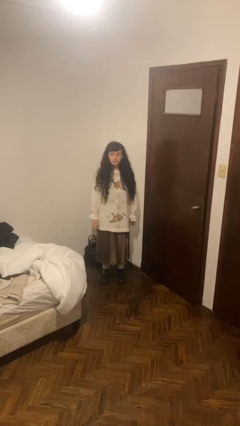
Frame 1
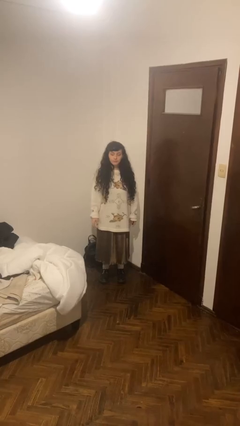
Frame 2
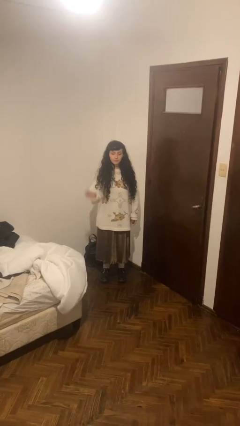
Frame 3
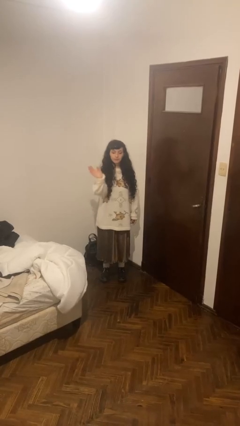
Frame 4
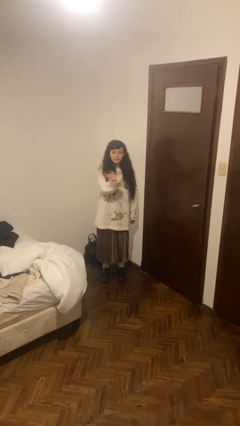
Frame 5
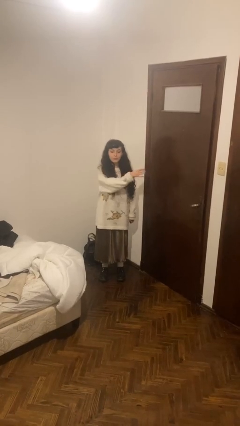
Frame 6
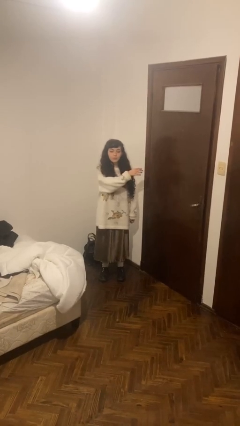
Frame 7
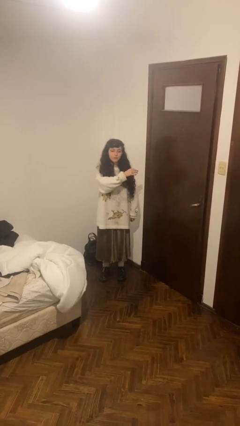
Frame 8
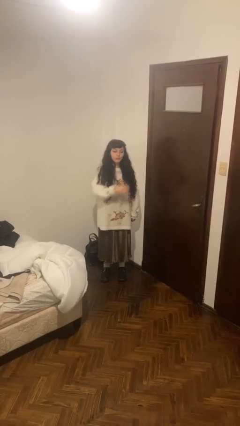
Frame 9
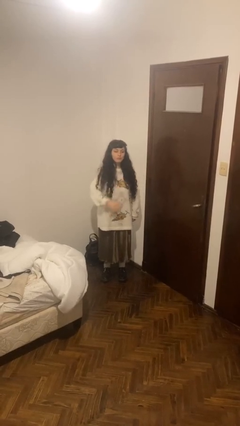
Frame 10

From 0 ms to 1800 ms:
person gestures swipe left

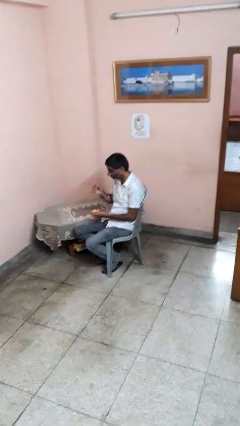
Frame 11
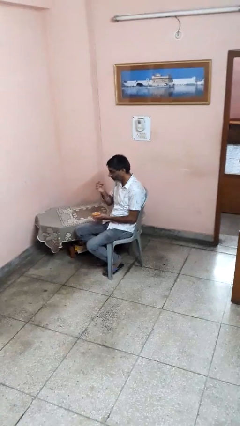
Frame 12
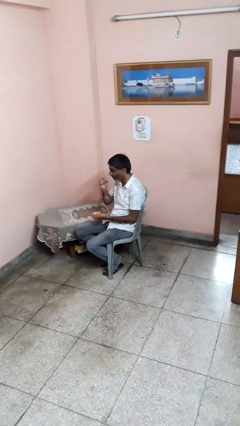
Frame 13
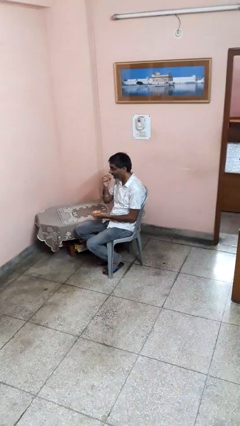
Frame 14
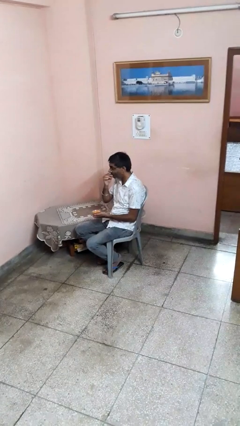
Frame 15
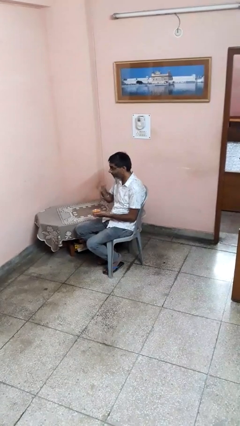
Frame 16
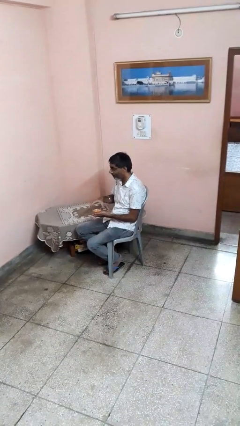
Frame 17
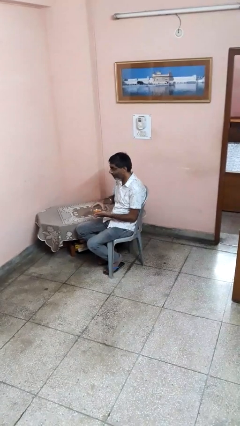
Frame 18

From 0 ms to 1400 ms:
person eats with hands

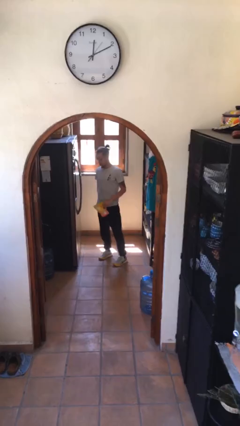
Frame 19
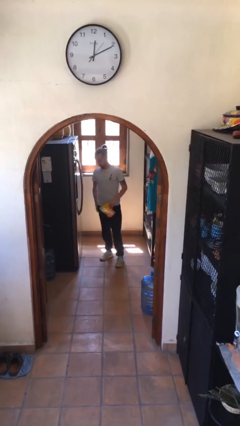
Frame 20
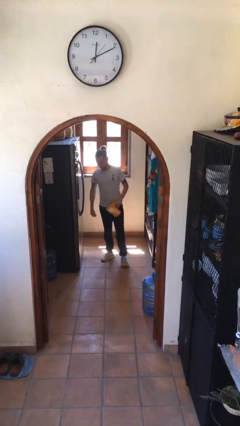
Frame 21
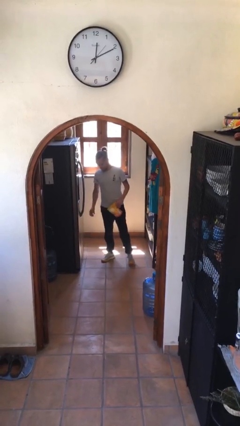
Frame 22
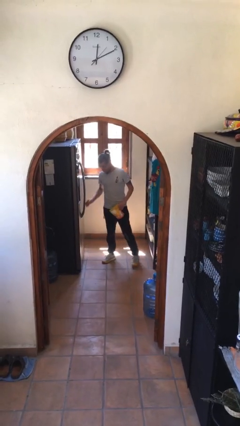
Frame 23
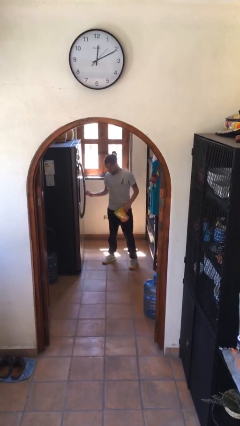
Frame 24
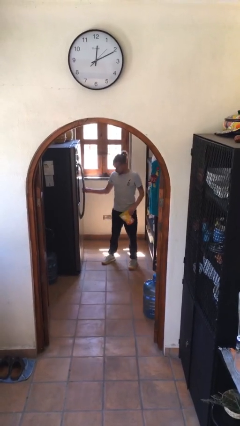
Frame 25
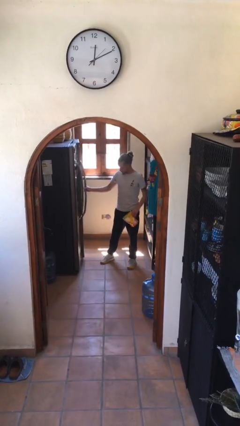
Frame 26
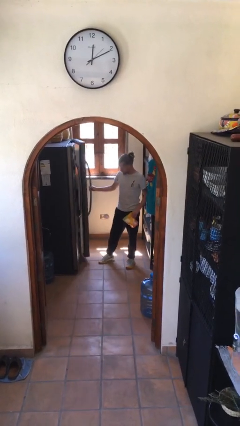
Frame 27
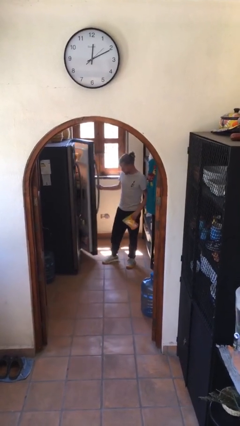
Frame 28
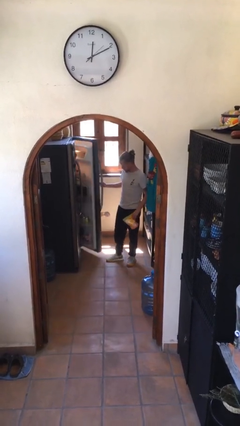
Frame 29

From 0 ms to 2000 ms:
person opens refrigerator

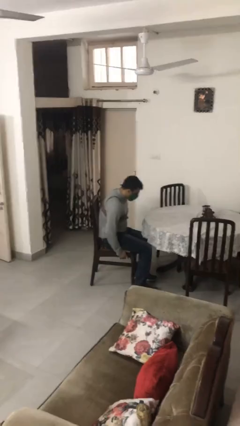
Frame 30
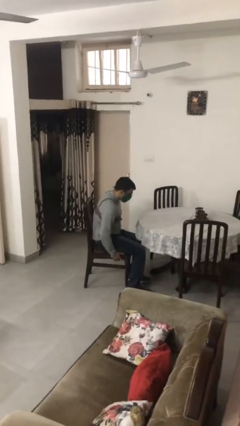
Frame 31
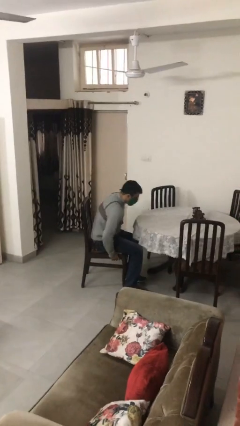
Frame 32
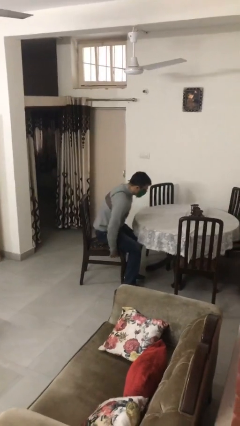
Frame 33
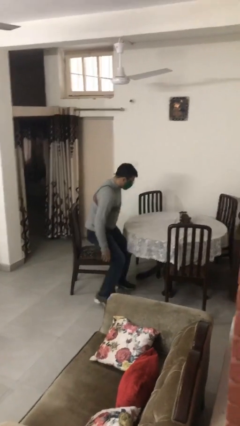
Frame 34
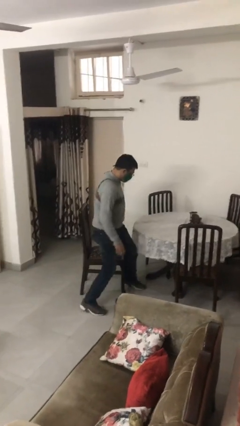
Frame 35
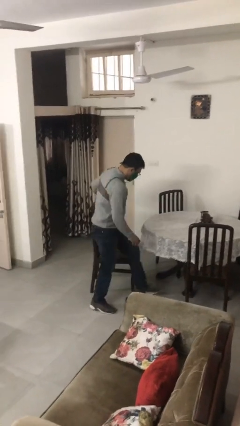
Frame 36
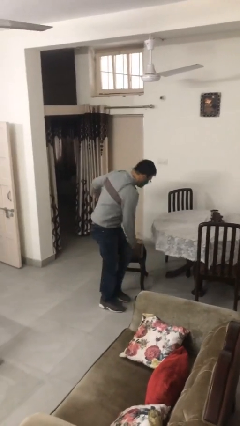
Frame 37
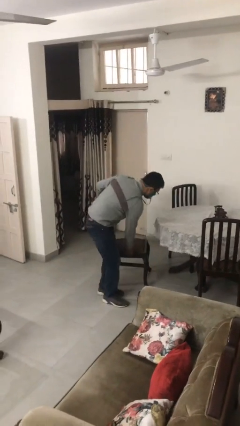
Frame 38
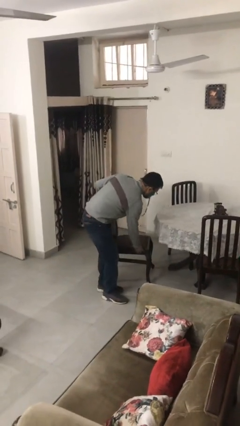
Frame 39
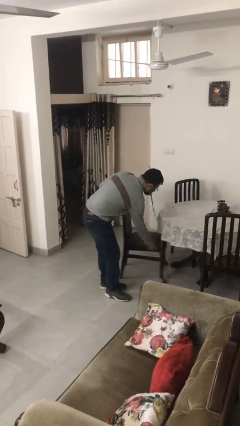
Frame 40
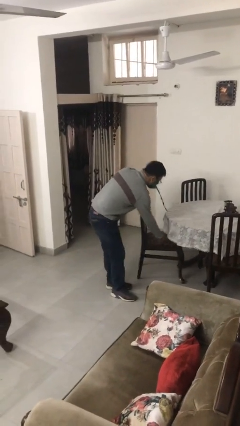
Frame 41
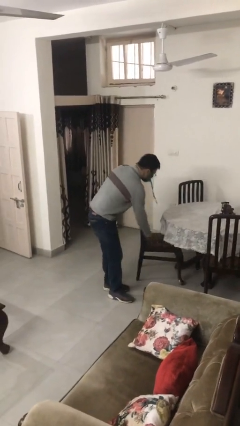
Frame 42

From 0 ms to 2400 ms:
person stands up

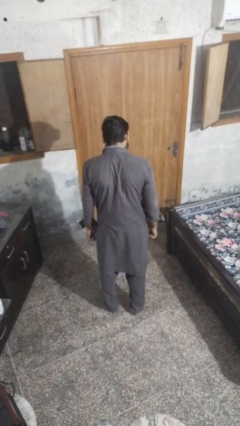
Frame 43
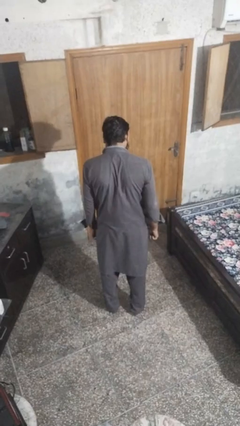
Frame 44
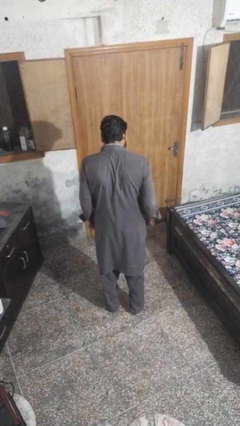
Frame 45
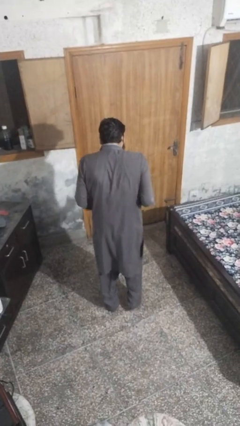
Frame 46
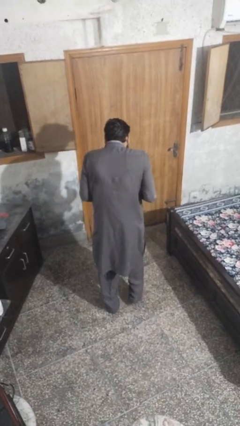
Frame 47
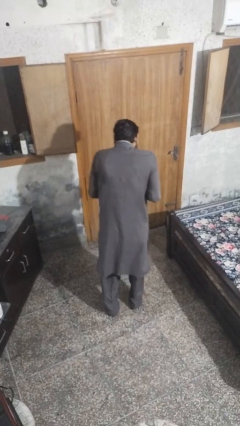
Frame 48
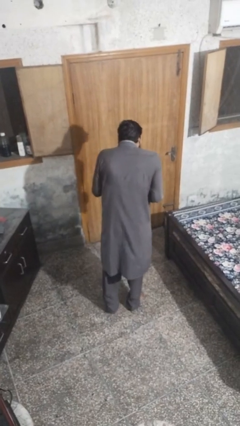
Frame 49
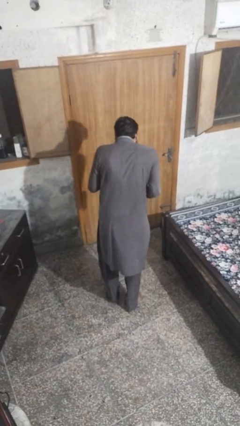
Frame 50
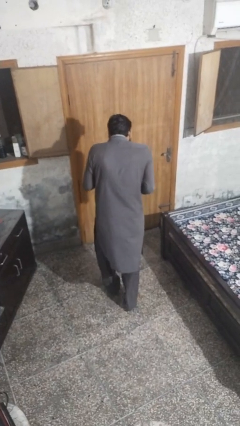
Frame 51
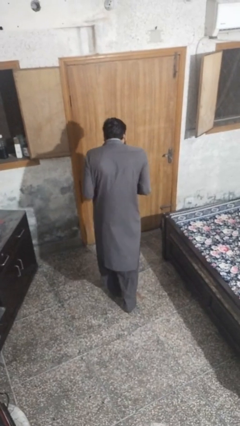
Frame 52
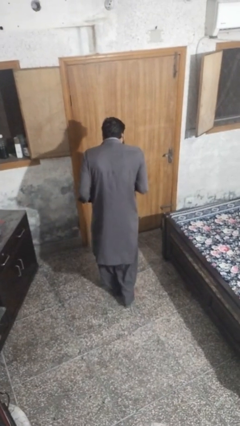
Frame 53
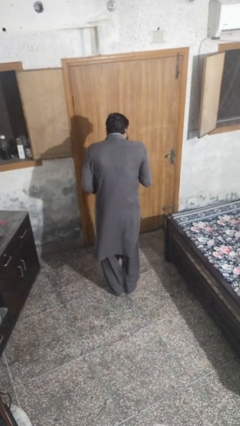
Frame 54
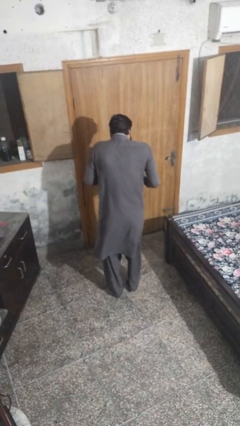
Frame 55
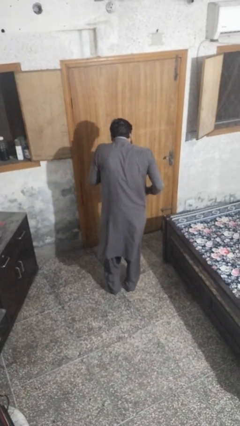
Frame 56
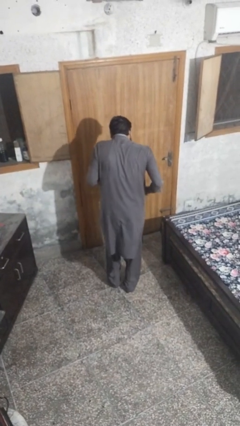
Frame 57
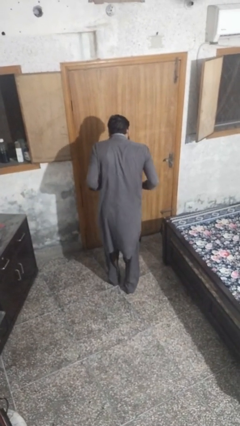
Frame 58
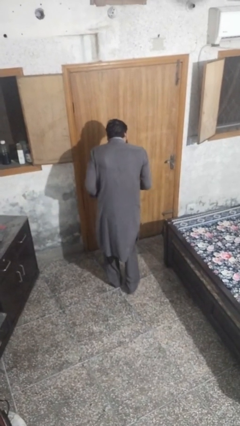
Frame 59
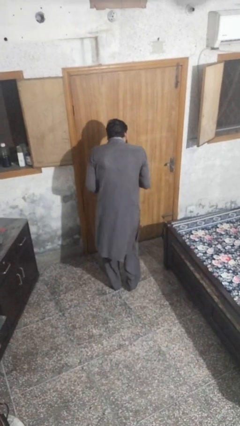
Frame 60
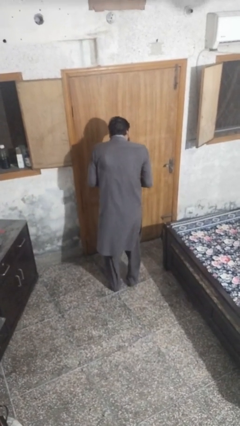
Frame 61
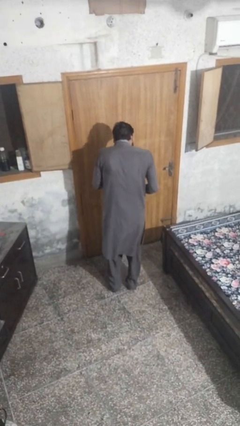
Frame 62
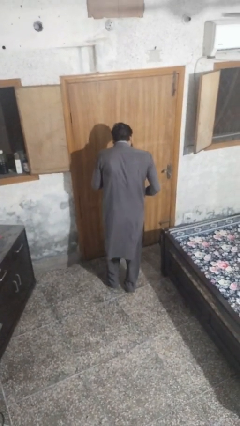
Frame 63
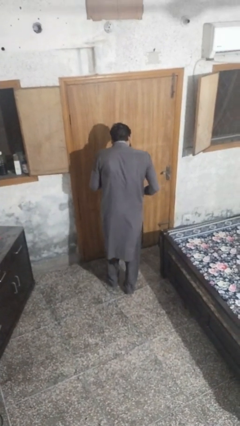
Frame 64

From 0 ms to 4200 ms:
person walks tiptoe

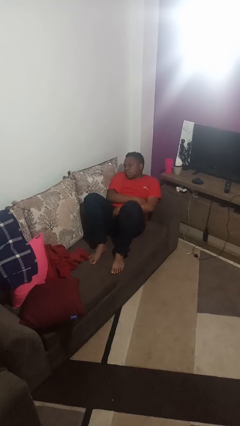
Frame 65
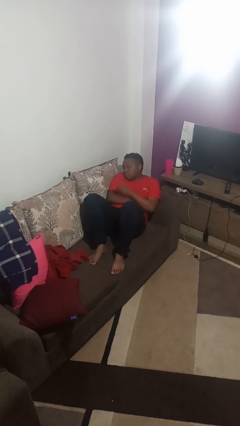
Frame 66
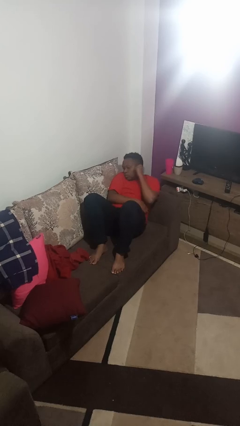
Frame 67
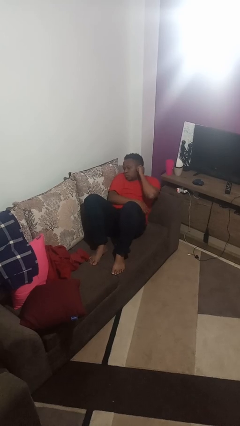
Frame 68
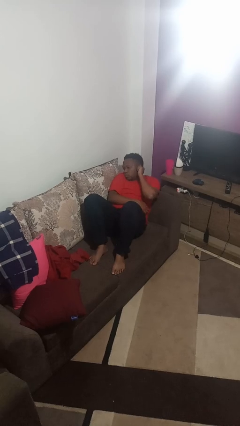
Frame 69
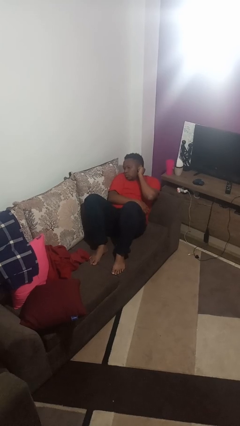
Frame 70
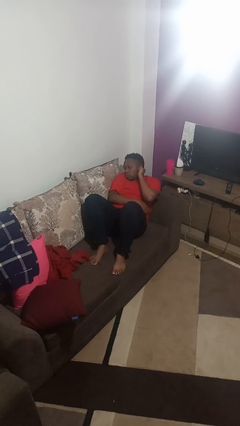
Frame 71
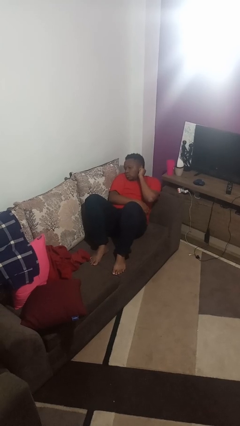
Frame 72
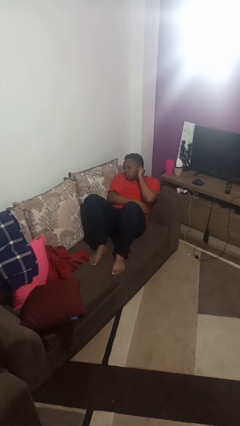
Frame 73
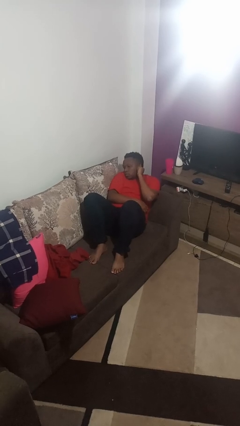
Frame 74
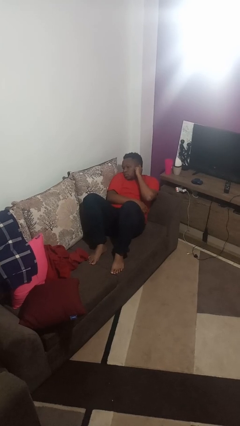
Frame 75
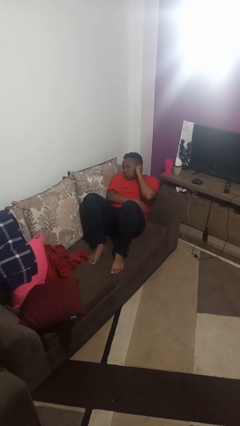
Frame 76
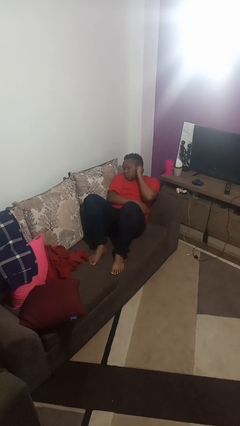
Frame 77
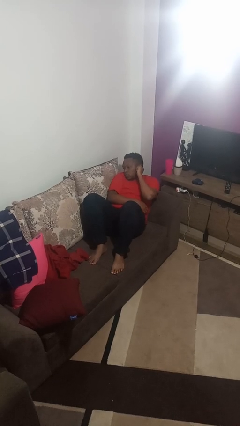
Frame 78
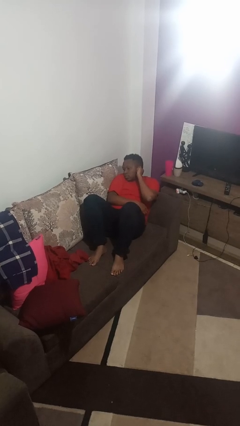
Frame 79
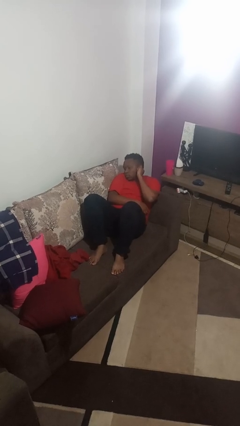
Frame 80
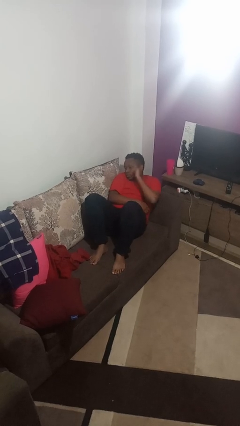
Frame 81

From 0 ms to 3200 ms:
person touches earlobe

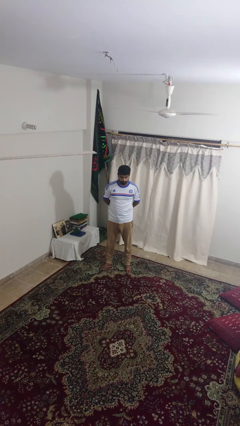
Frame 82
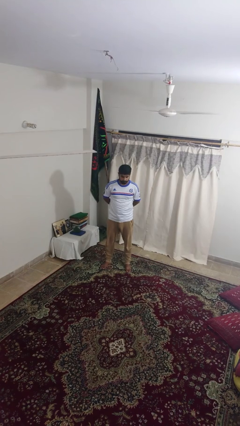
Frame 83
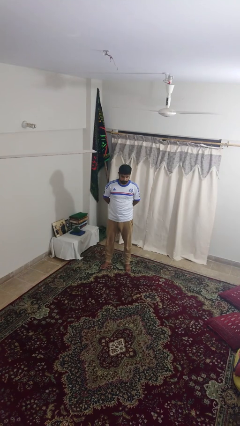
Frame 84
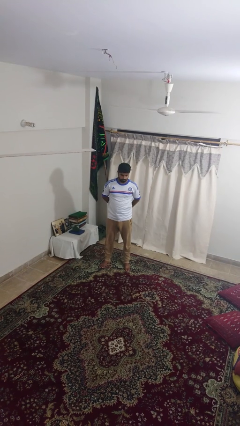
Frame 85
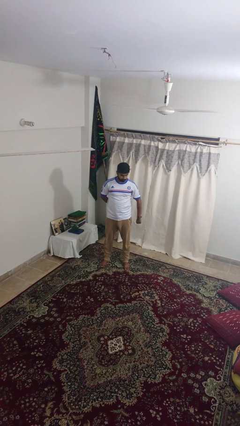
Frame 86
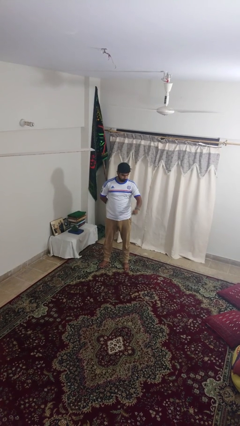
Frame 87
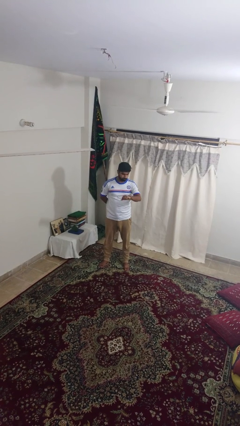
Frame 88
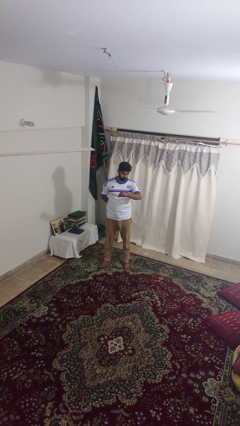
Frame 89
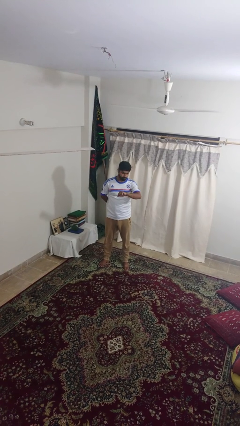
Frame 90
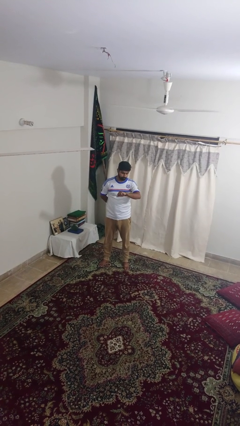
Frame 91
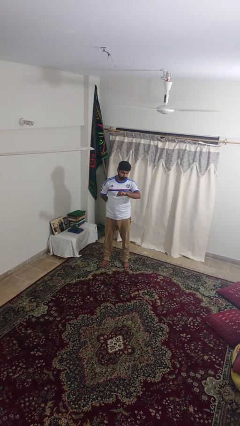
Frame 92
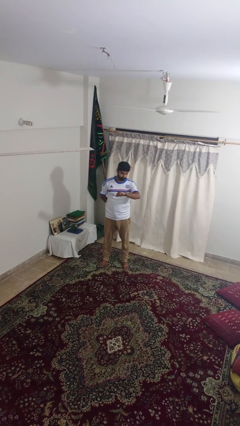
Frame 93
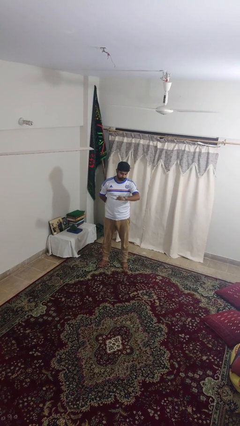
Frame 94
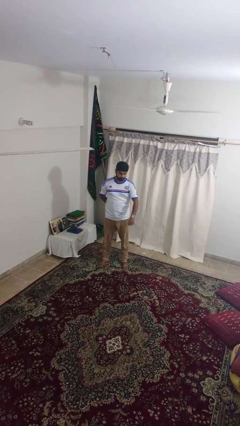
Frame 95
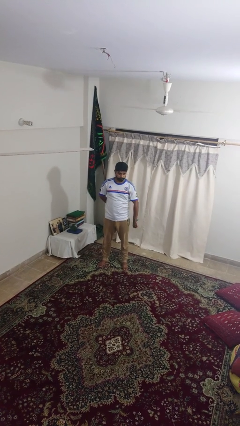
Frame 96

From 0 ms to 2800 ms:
person looks at wristwatch
